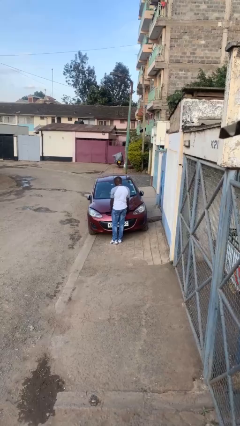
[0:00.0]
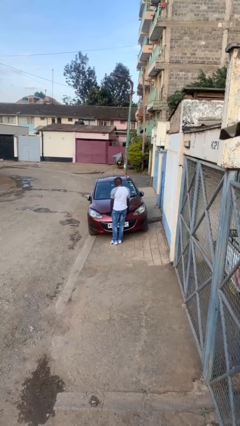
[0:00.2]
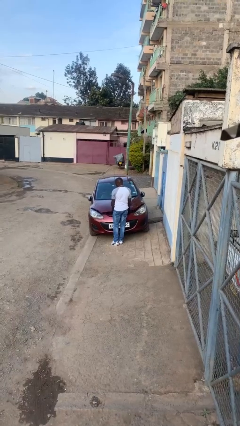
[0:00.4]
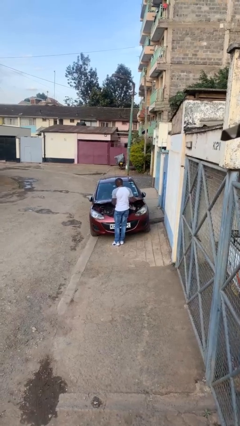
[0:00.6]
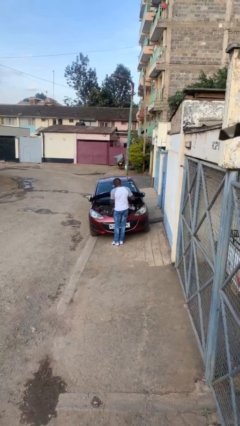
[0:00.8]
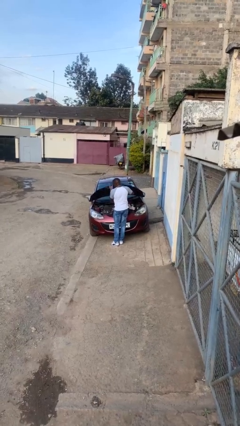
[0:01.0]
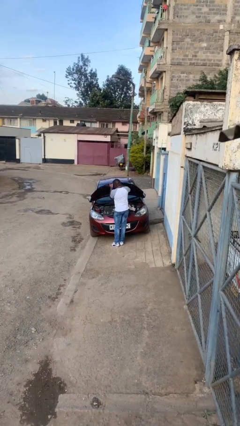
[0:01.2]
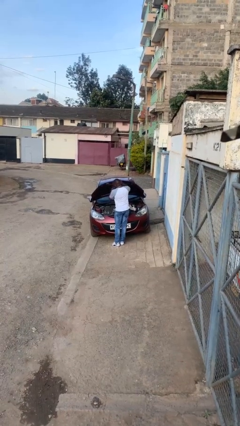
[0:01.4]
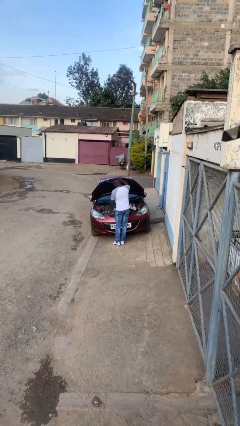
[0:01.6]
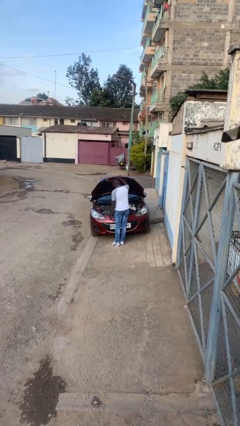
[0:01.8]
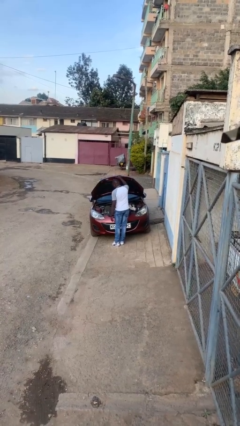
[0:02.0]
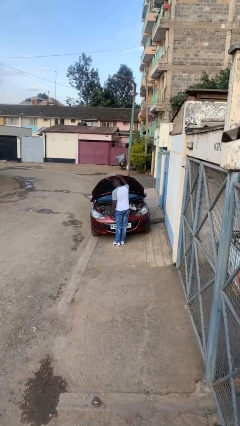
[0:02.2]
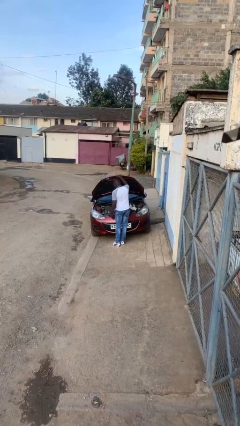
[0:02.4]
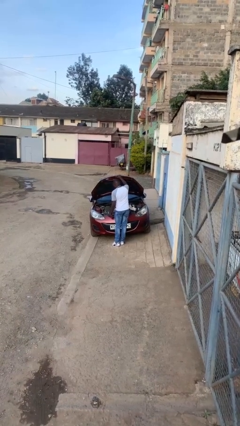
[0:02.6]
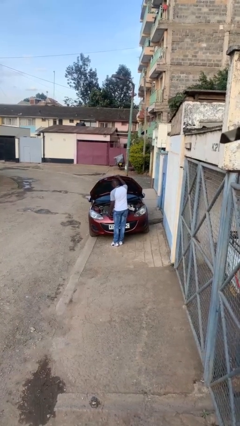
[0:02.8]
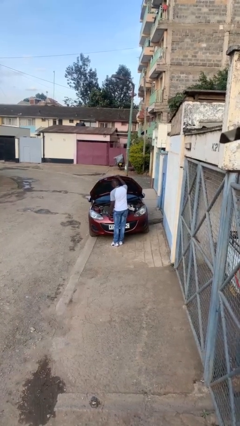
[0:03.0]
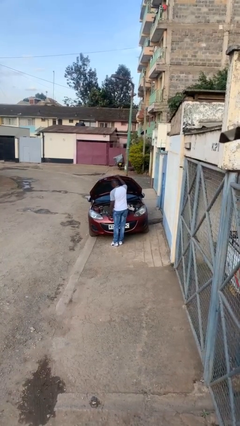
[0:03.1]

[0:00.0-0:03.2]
person opens car hood

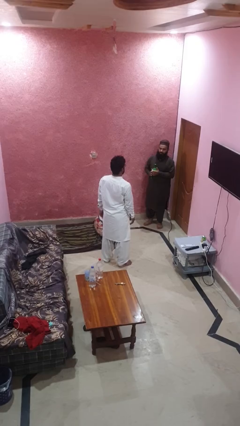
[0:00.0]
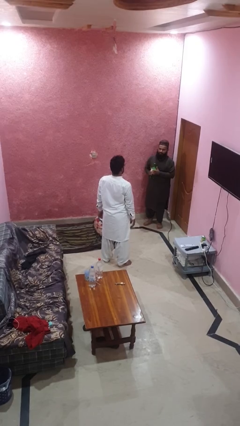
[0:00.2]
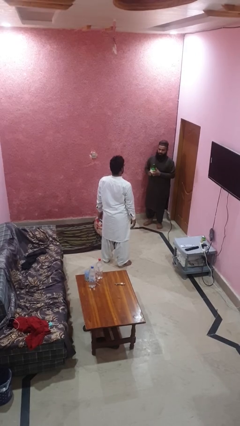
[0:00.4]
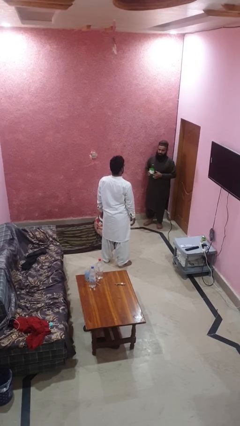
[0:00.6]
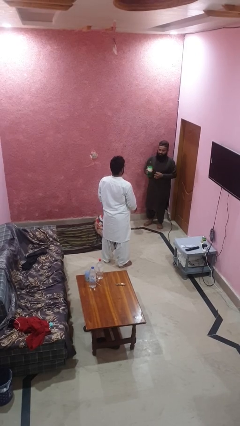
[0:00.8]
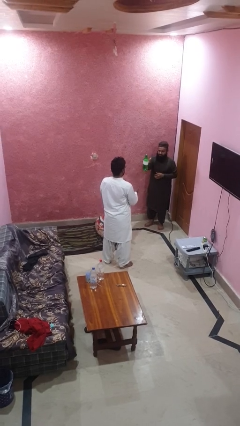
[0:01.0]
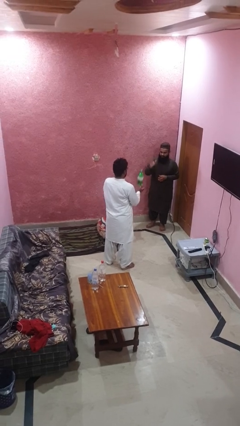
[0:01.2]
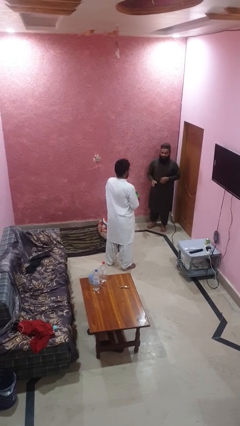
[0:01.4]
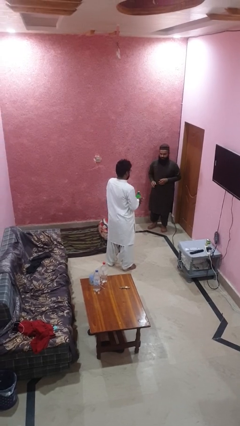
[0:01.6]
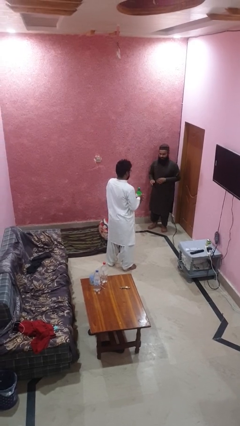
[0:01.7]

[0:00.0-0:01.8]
person catches object from person

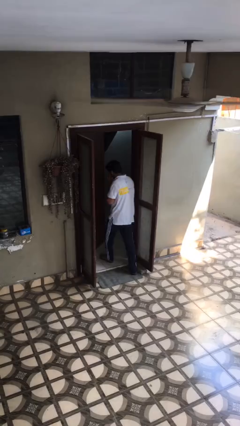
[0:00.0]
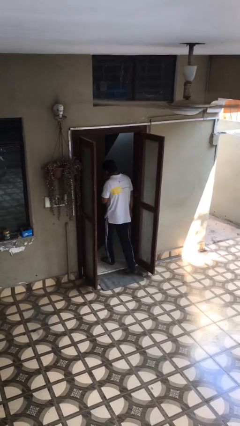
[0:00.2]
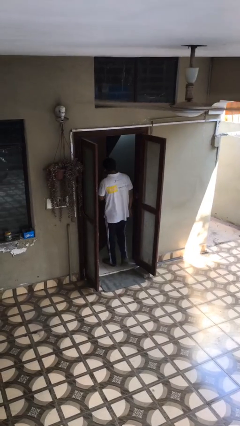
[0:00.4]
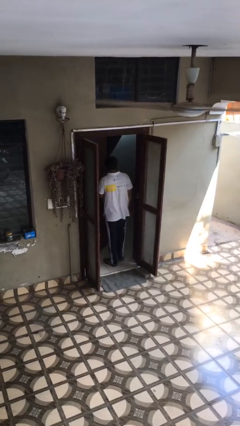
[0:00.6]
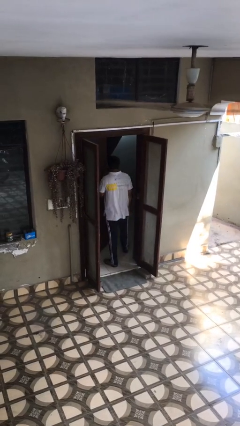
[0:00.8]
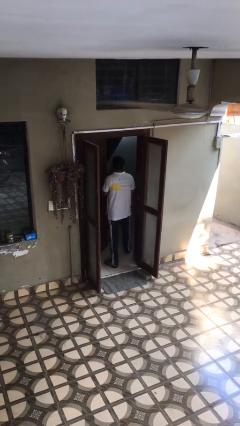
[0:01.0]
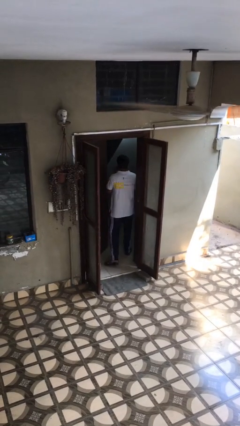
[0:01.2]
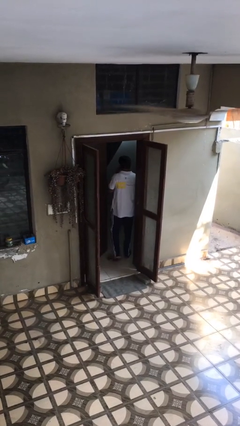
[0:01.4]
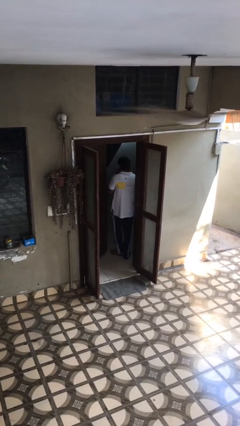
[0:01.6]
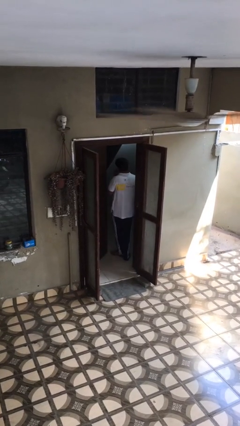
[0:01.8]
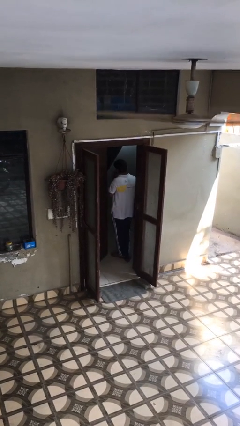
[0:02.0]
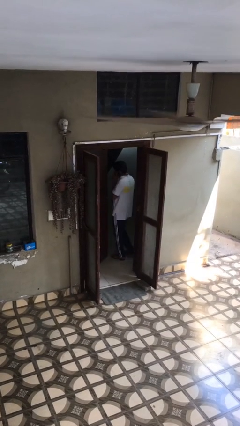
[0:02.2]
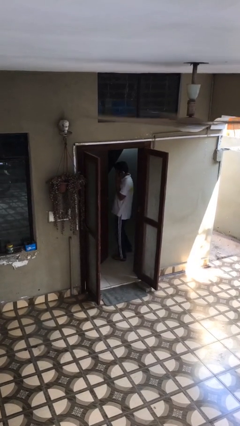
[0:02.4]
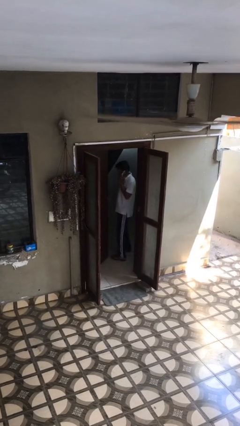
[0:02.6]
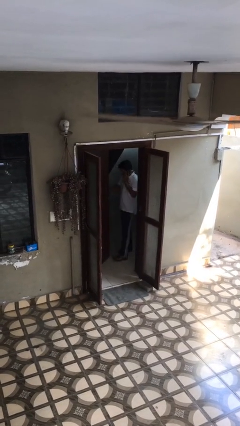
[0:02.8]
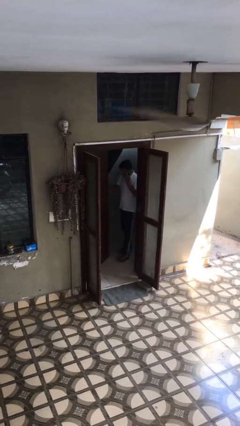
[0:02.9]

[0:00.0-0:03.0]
person exits scene through structure

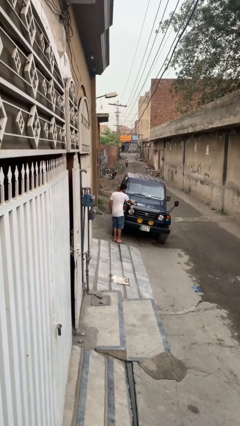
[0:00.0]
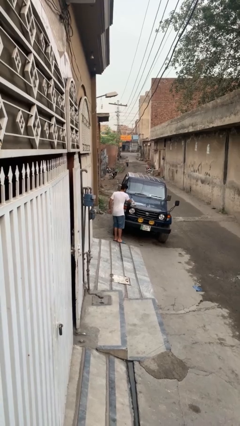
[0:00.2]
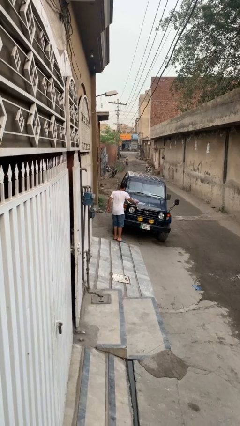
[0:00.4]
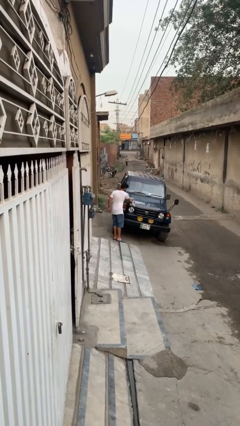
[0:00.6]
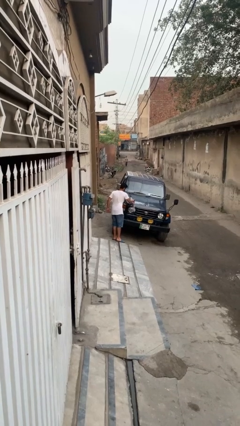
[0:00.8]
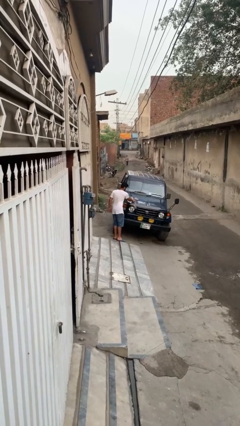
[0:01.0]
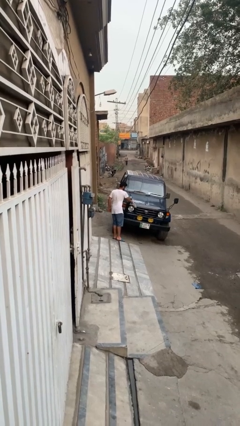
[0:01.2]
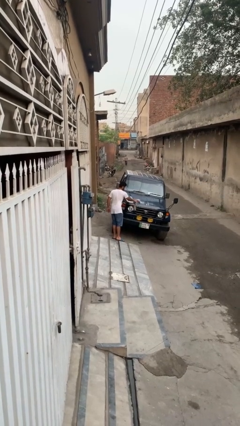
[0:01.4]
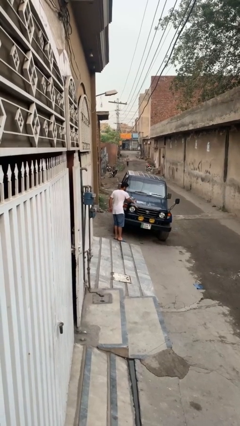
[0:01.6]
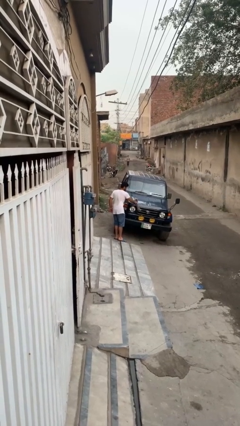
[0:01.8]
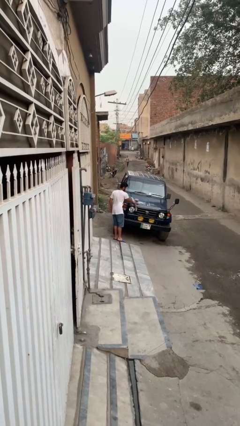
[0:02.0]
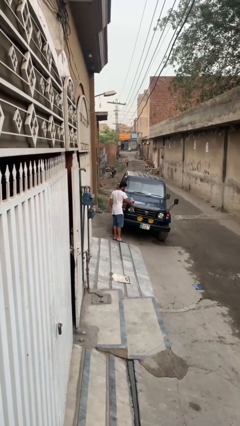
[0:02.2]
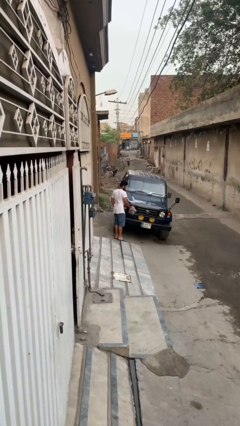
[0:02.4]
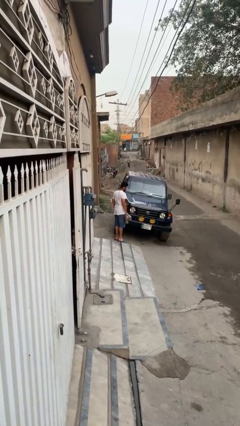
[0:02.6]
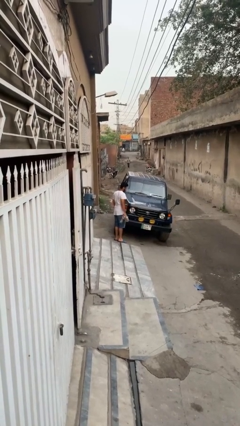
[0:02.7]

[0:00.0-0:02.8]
person polishes car with rag

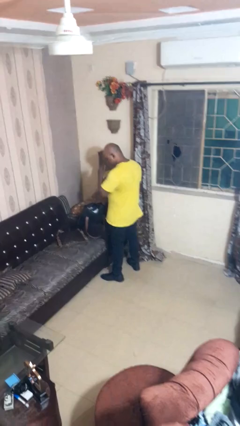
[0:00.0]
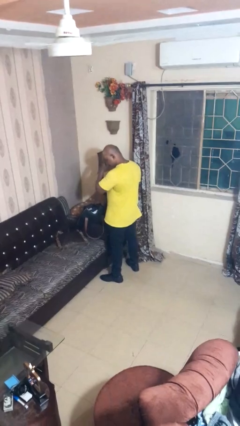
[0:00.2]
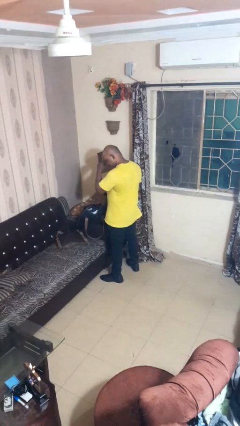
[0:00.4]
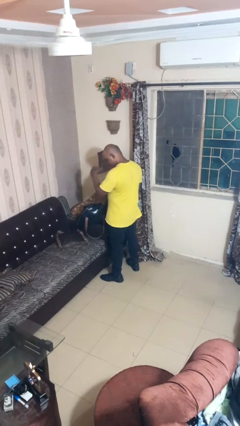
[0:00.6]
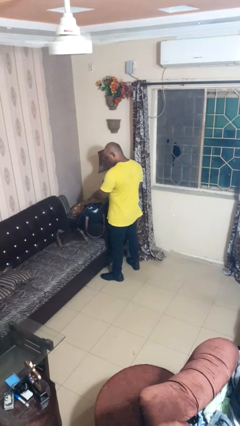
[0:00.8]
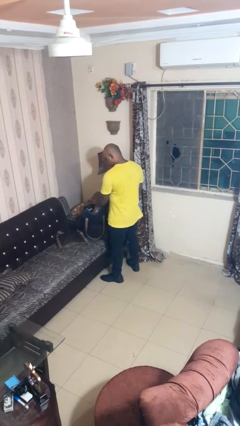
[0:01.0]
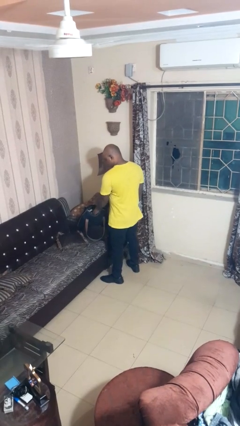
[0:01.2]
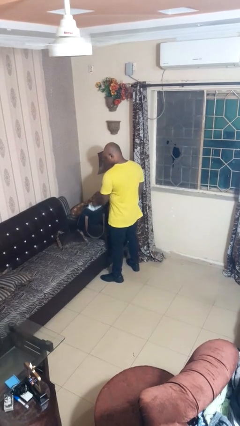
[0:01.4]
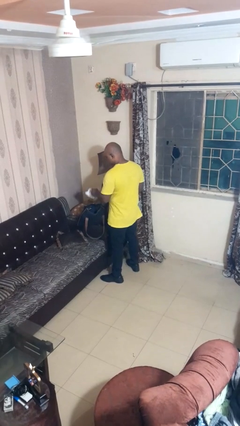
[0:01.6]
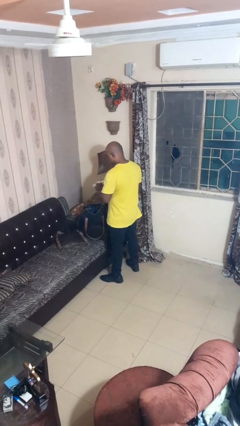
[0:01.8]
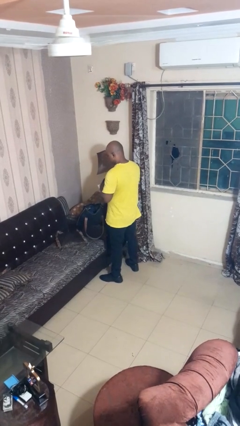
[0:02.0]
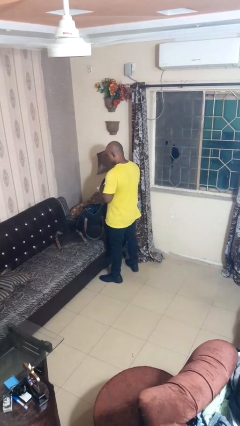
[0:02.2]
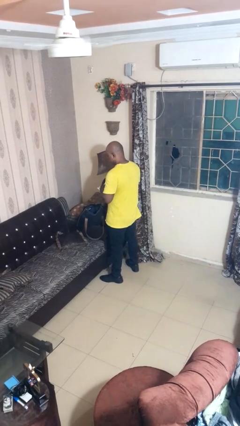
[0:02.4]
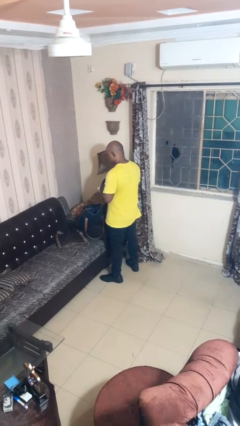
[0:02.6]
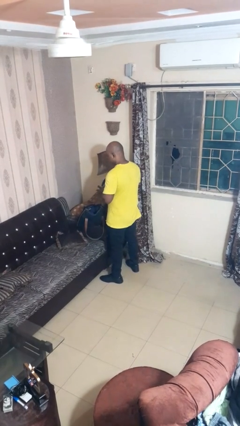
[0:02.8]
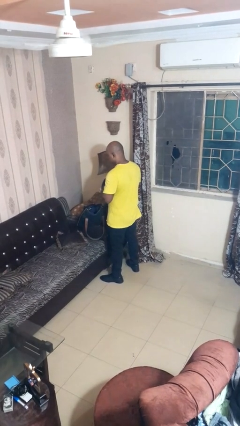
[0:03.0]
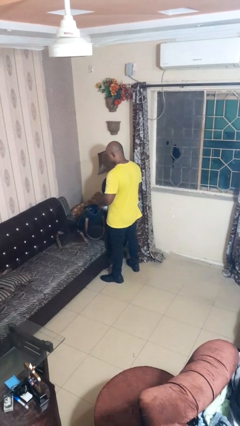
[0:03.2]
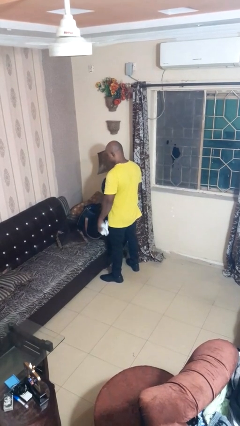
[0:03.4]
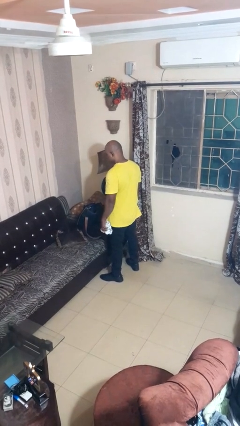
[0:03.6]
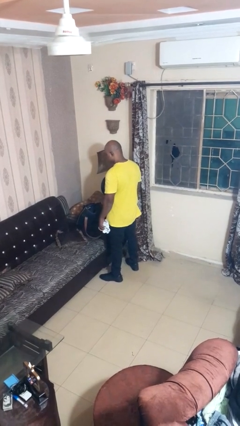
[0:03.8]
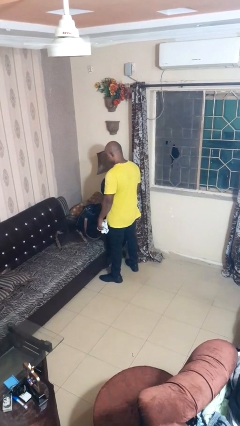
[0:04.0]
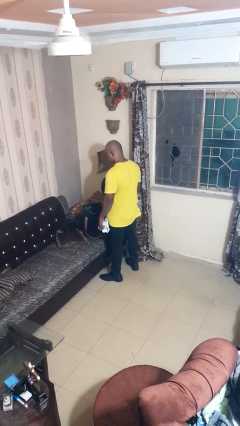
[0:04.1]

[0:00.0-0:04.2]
person takes object from bag

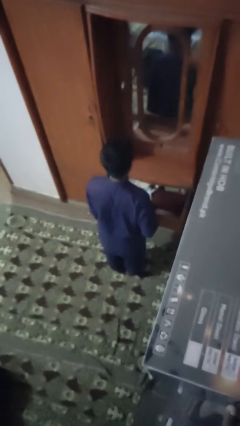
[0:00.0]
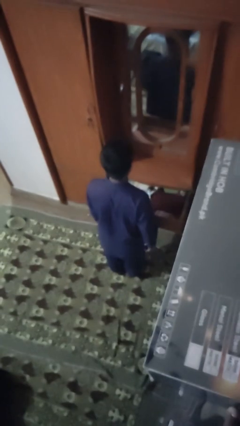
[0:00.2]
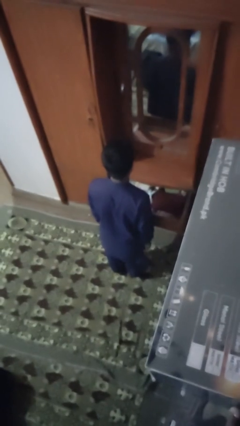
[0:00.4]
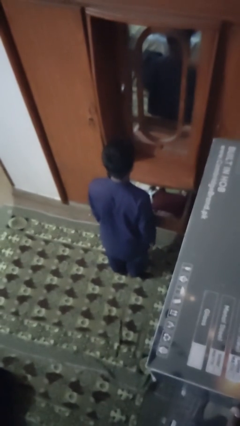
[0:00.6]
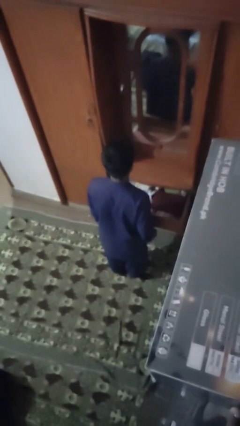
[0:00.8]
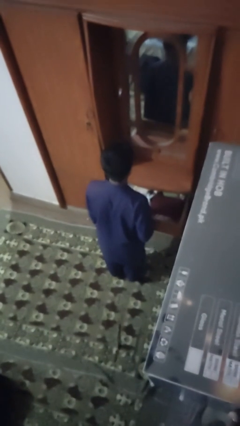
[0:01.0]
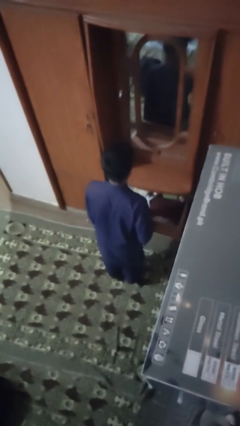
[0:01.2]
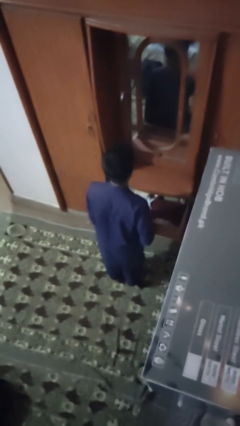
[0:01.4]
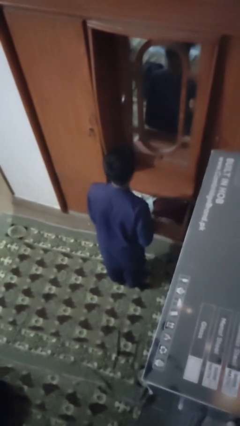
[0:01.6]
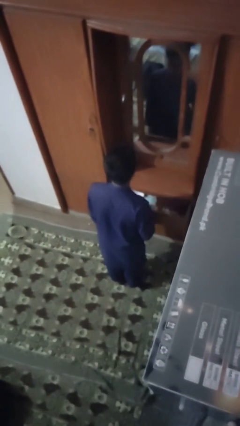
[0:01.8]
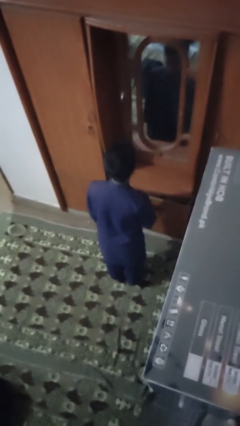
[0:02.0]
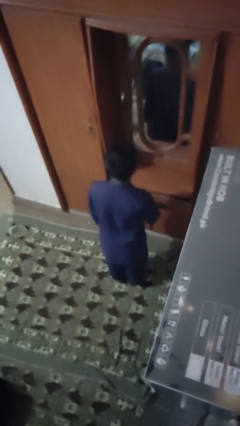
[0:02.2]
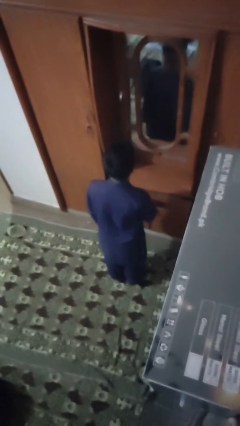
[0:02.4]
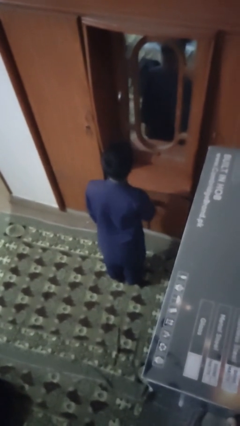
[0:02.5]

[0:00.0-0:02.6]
person closes dresser drawer
